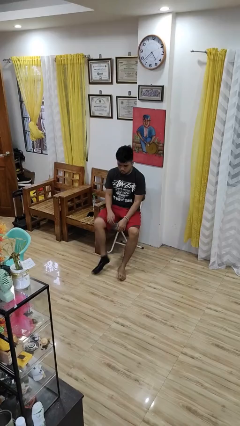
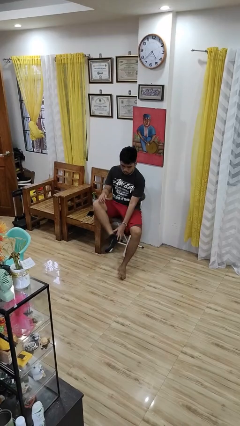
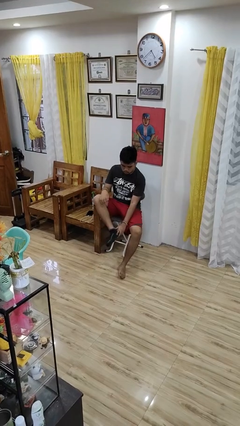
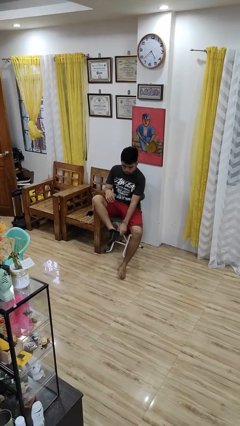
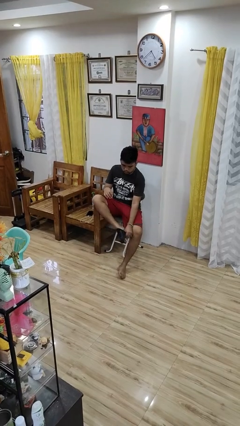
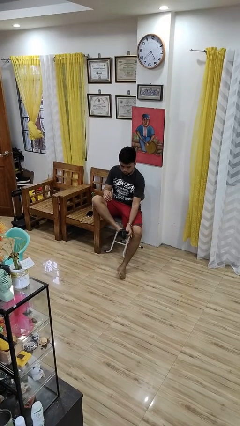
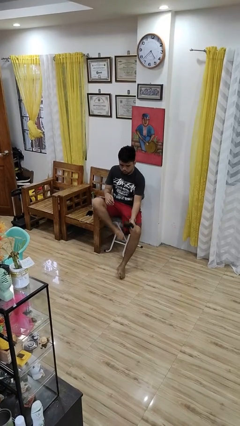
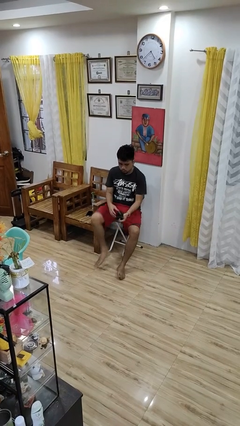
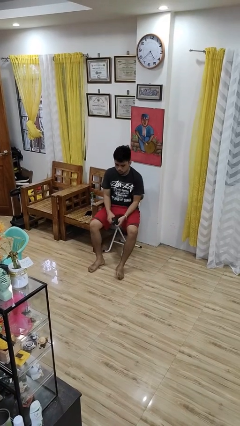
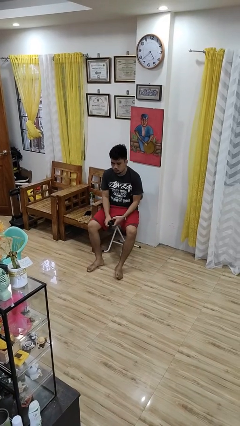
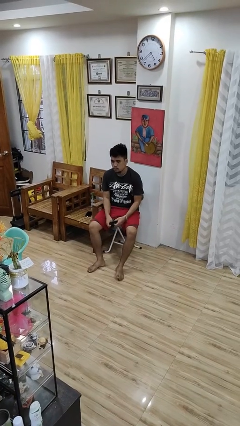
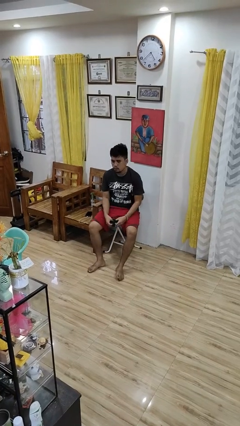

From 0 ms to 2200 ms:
person takes off socks

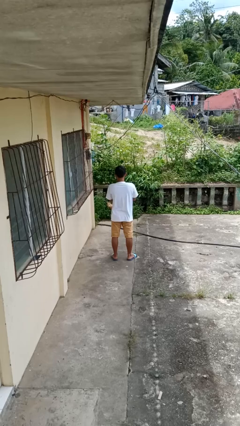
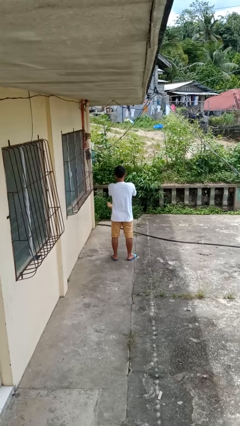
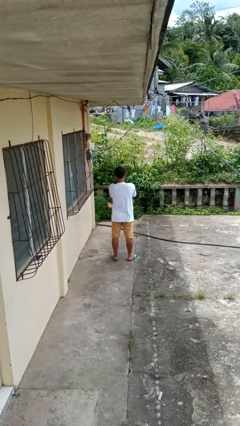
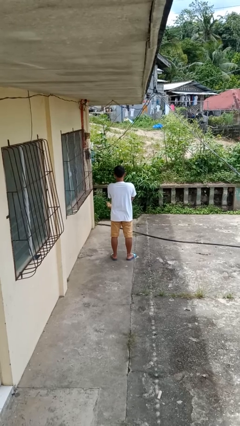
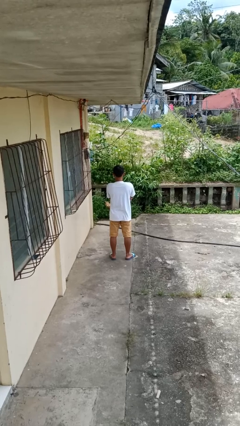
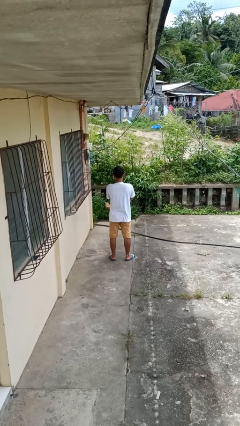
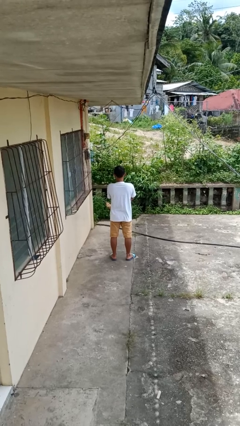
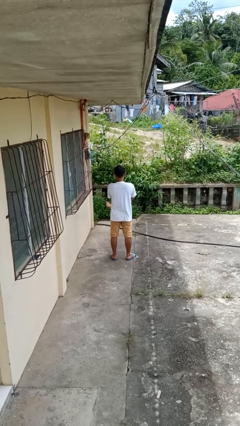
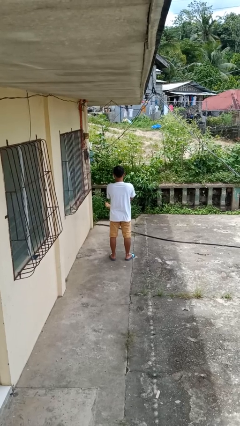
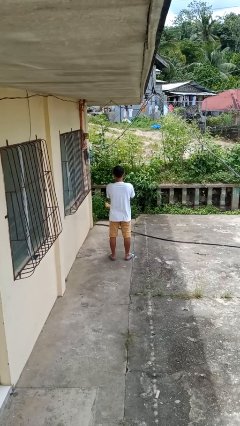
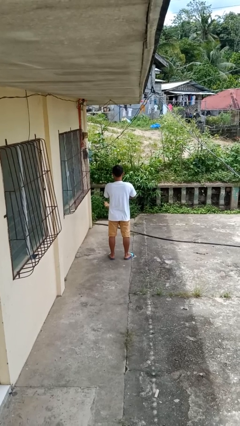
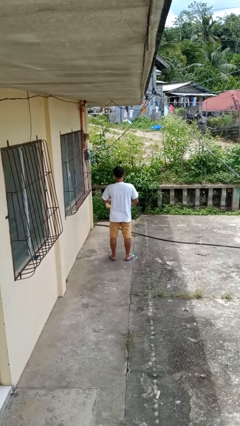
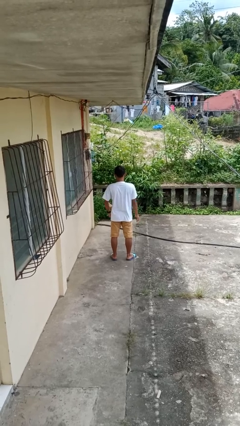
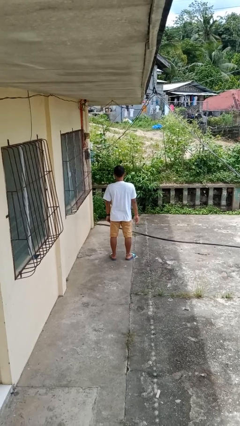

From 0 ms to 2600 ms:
person crosses arms

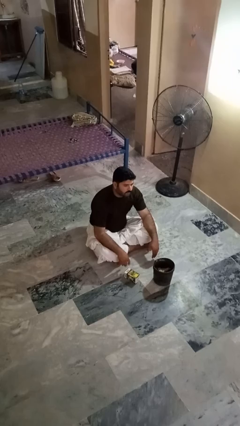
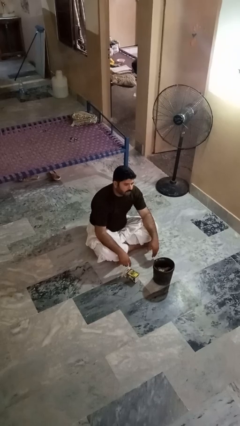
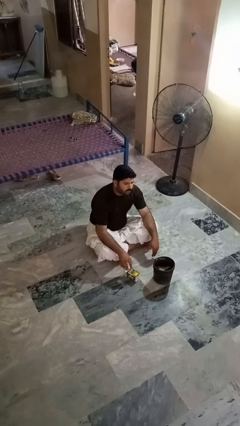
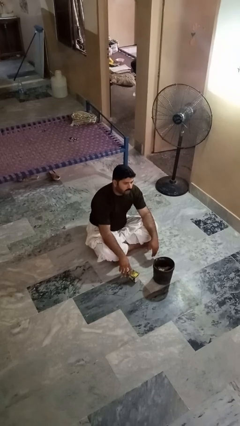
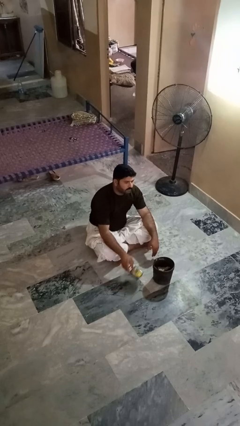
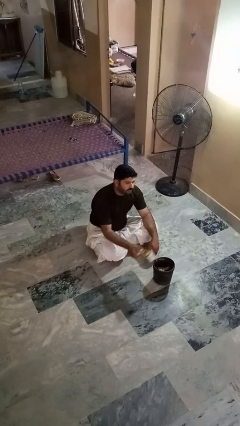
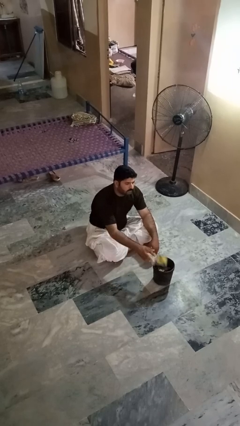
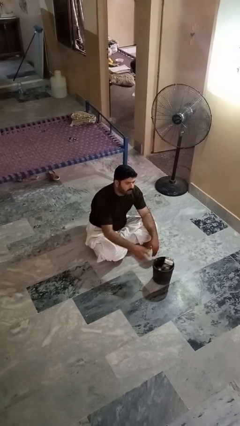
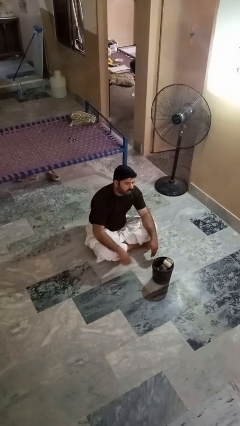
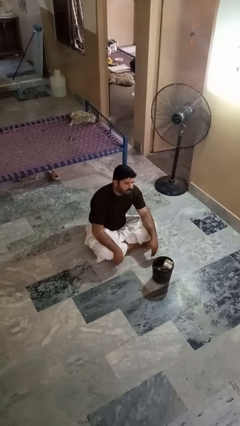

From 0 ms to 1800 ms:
person puts object into basket

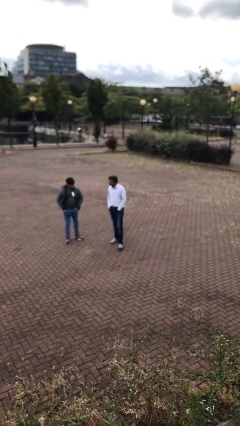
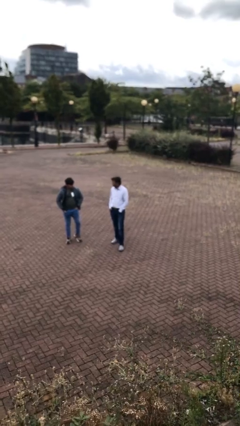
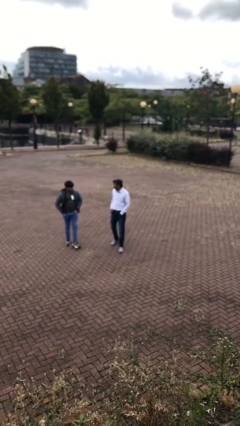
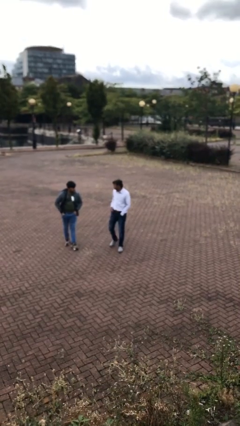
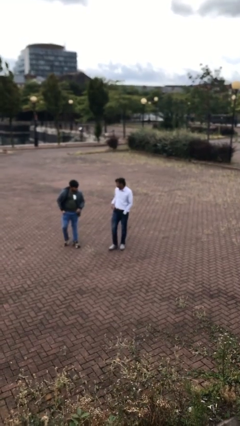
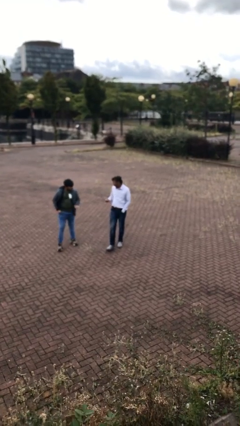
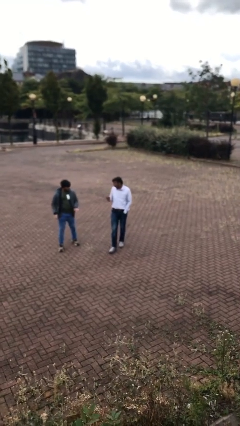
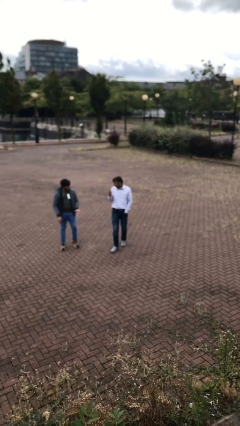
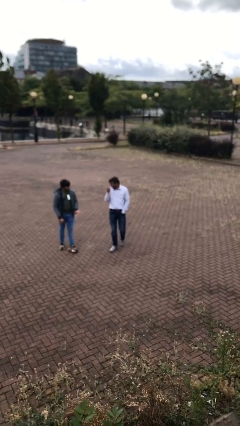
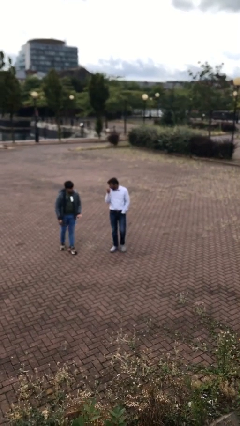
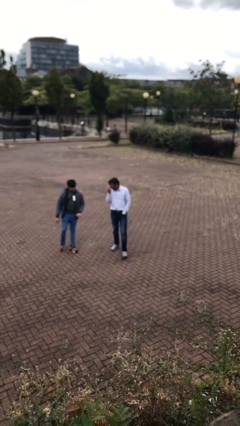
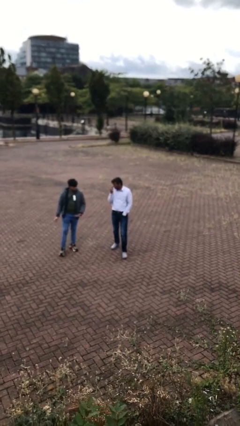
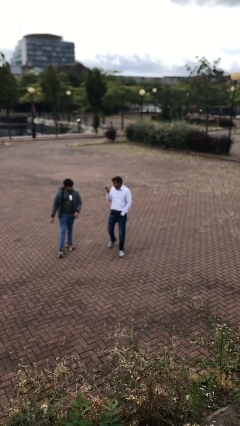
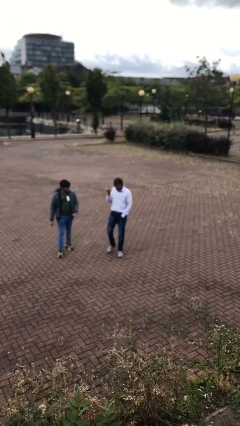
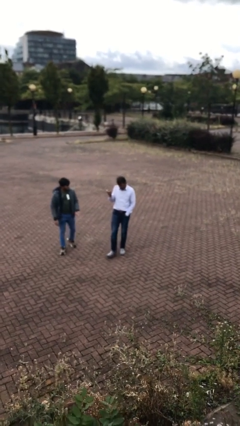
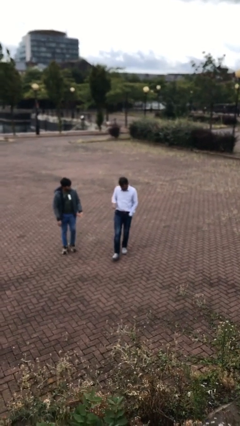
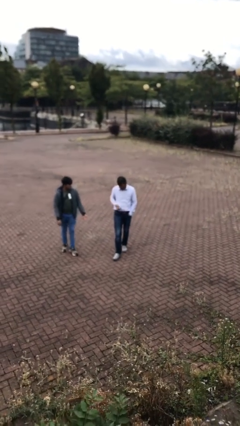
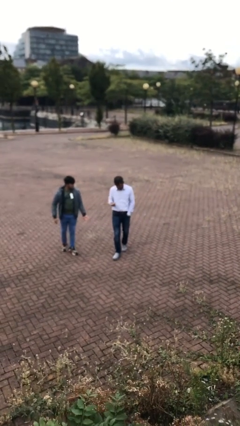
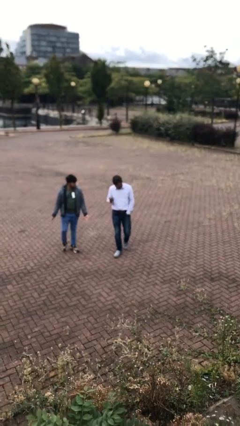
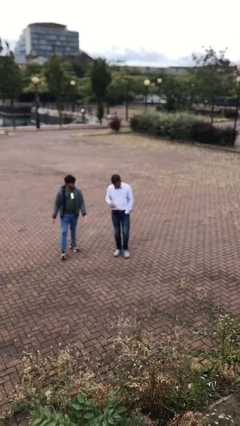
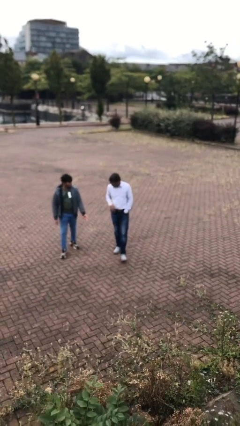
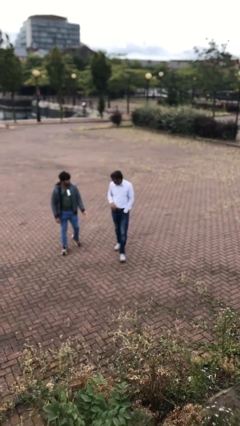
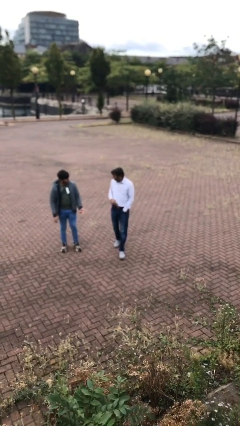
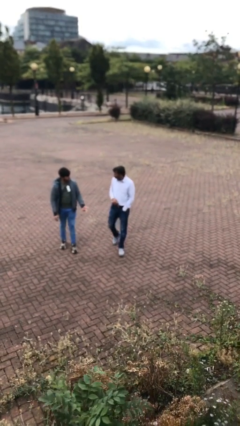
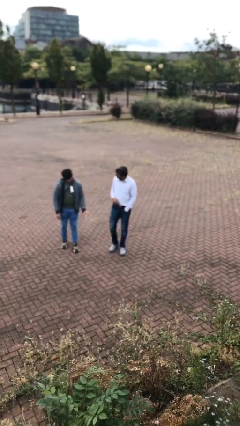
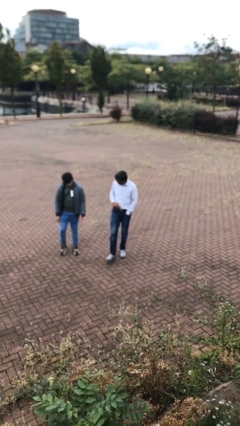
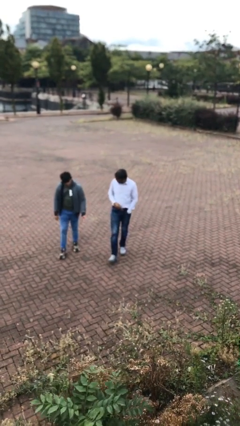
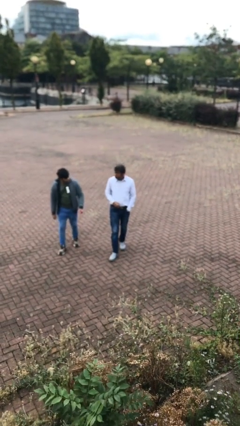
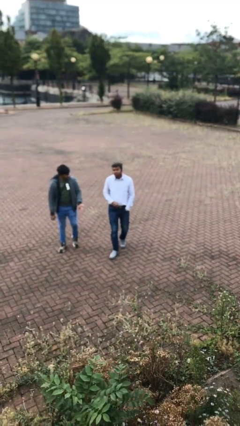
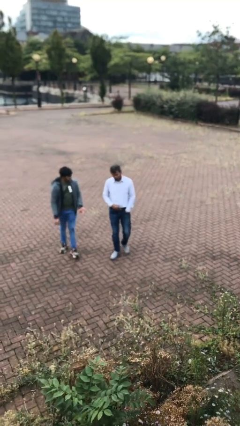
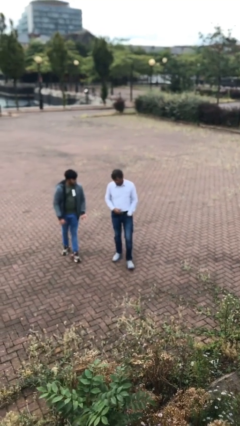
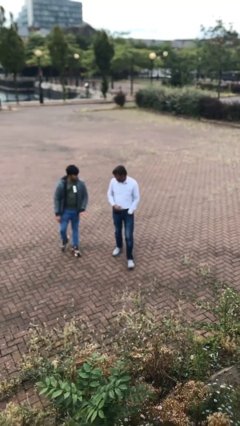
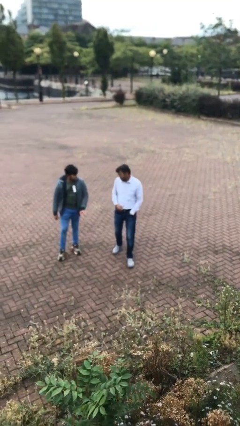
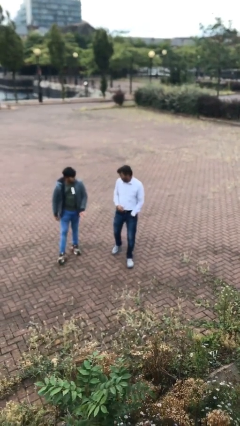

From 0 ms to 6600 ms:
person talks to person

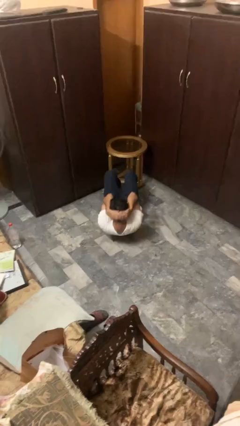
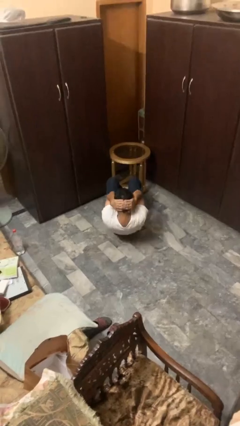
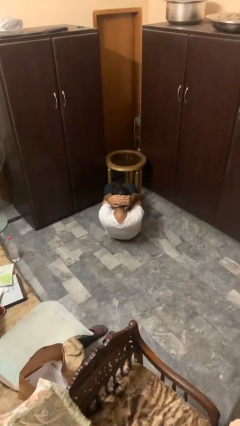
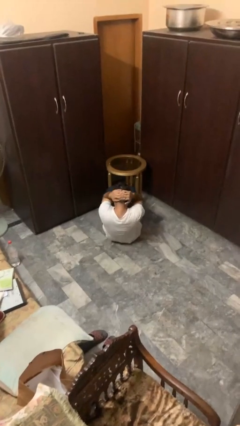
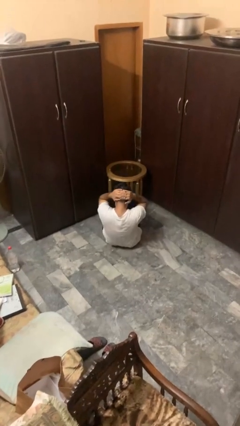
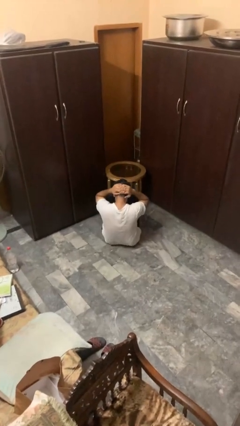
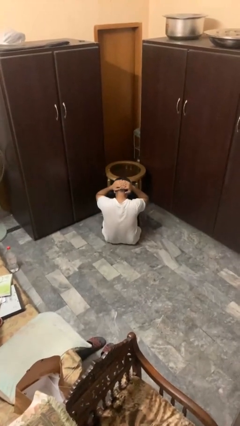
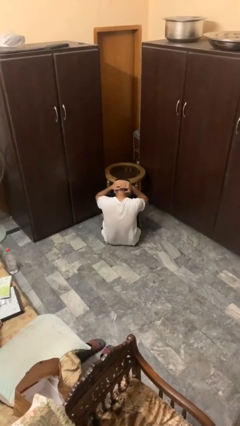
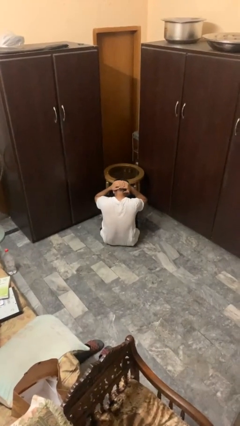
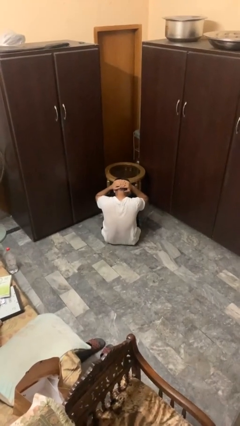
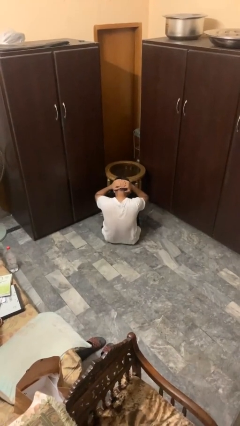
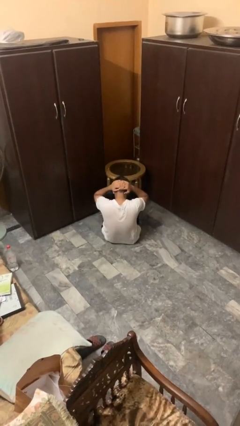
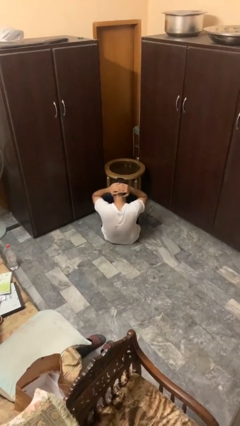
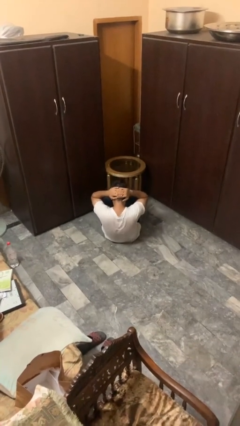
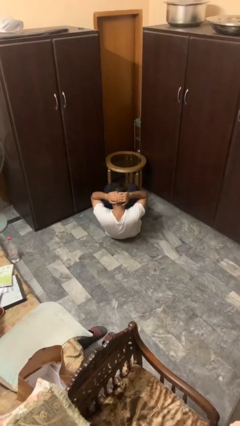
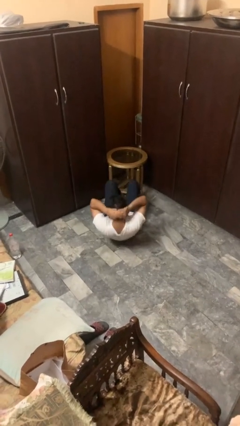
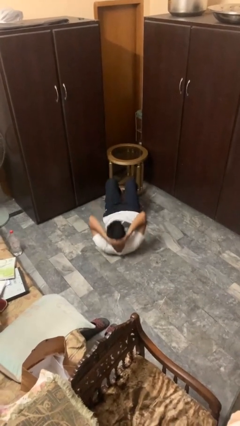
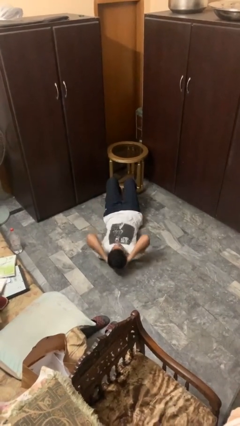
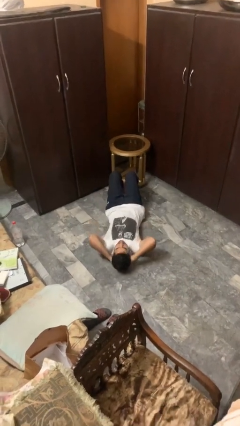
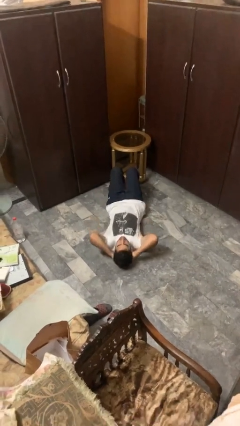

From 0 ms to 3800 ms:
person exercises with situp

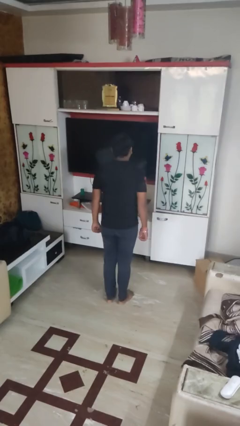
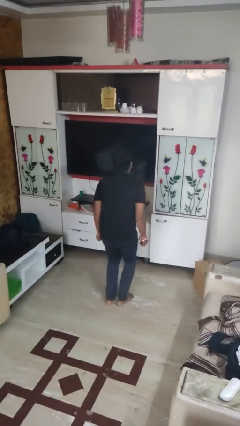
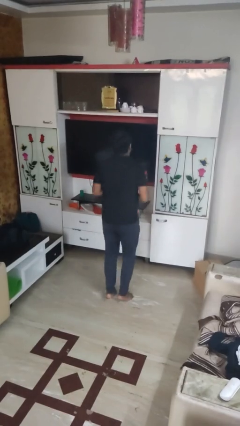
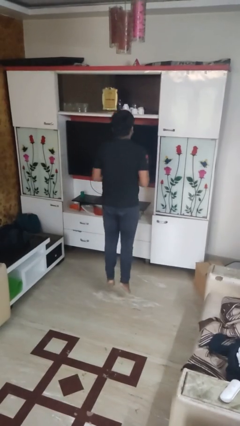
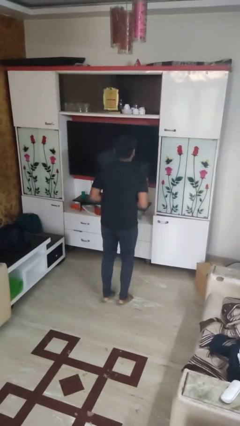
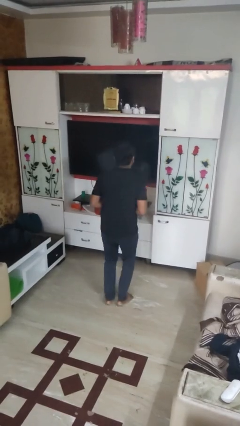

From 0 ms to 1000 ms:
person jumps
